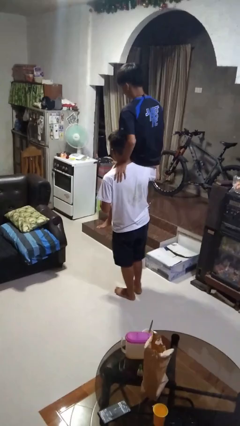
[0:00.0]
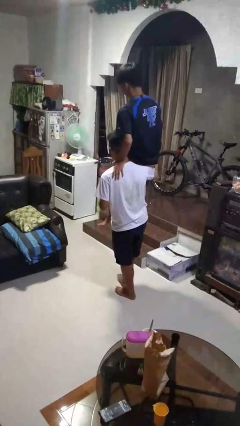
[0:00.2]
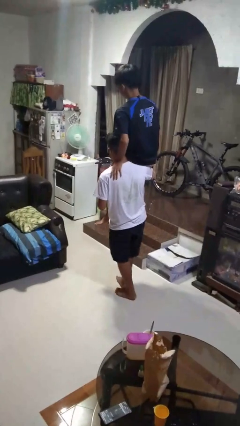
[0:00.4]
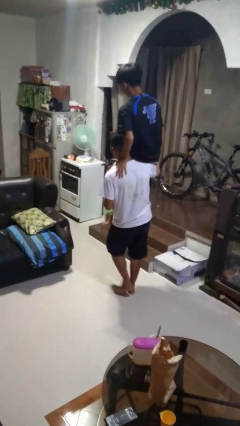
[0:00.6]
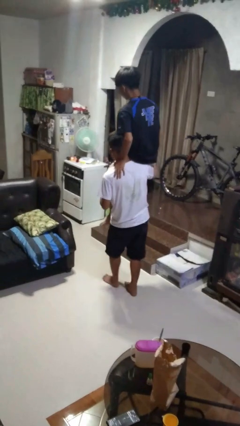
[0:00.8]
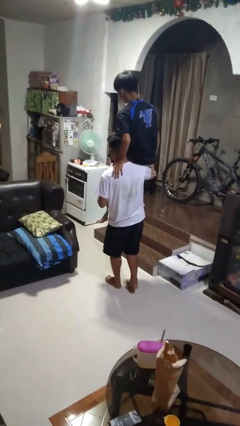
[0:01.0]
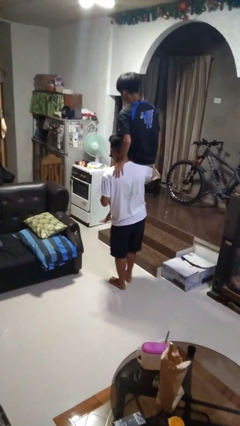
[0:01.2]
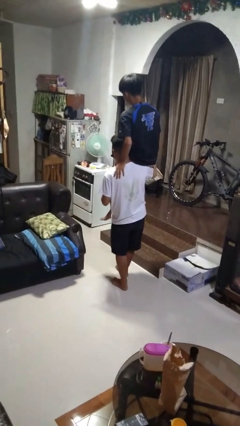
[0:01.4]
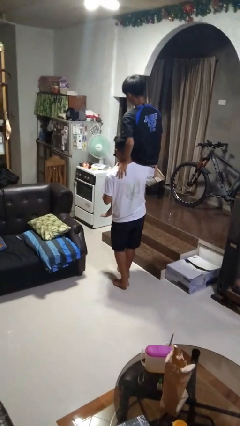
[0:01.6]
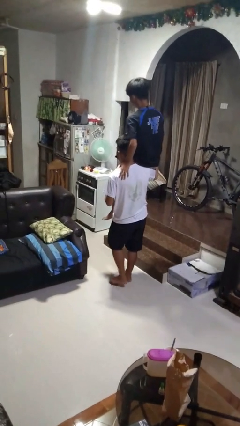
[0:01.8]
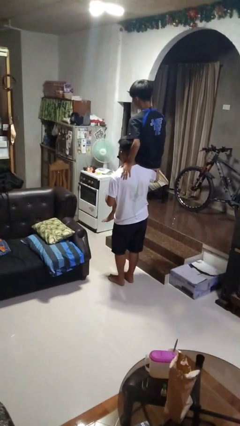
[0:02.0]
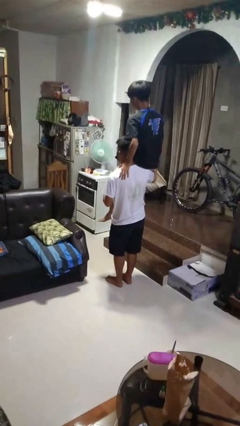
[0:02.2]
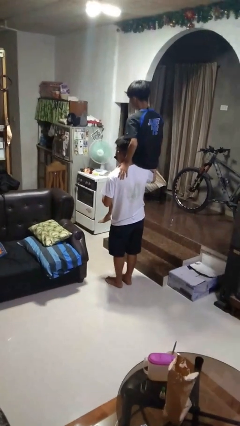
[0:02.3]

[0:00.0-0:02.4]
person carries person on back

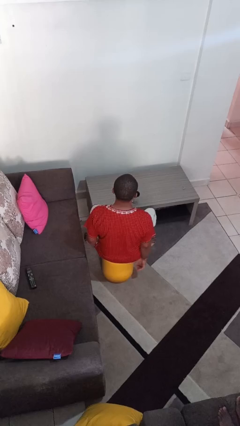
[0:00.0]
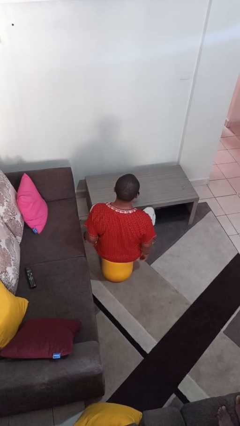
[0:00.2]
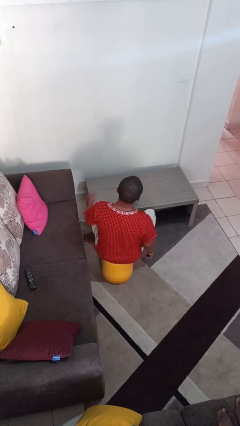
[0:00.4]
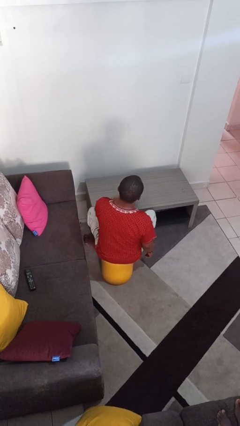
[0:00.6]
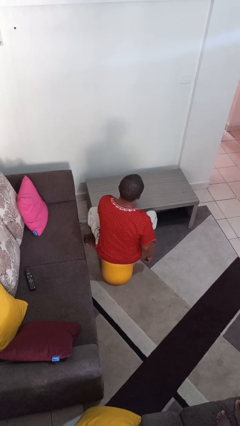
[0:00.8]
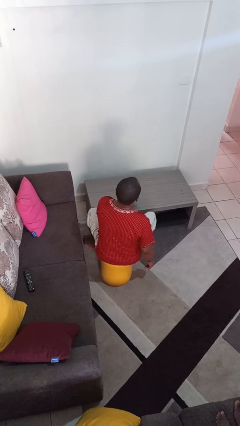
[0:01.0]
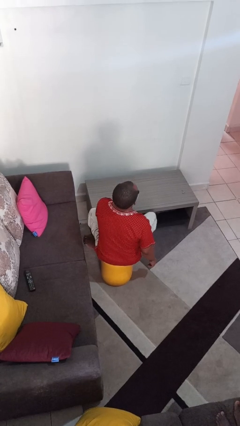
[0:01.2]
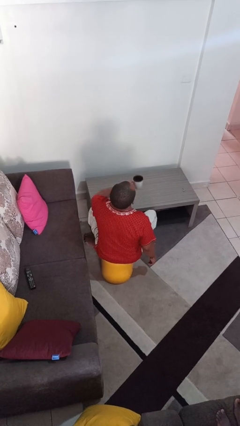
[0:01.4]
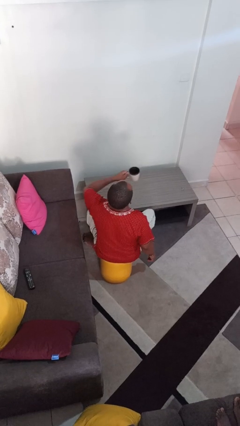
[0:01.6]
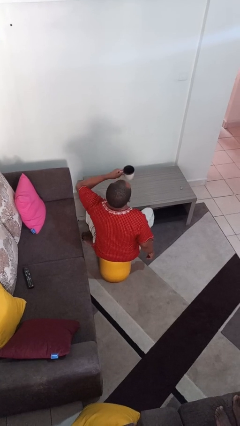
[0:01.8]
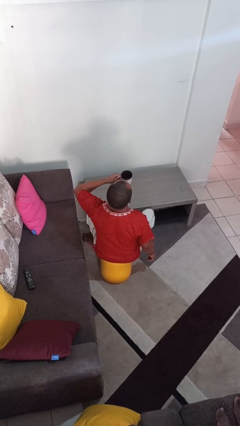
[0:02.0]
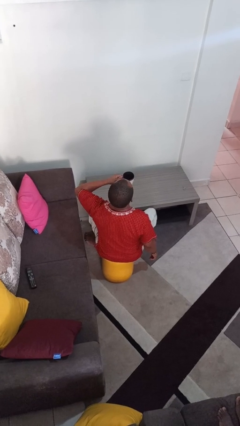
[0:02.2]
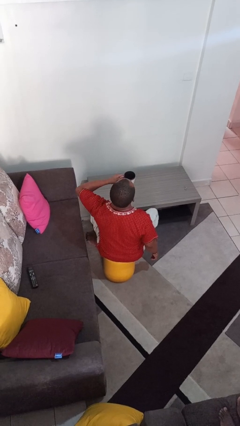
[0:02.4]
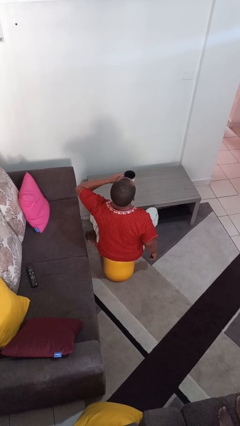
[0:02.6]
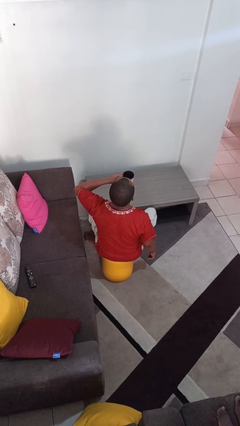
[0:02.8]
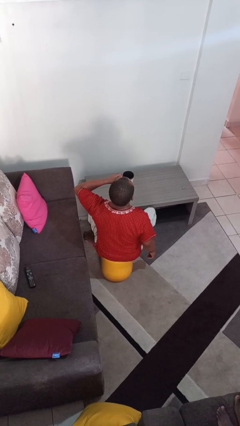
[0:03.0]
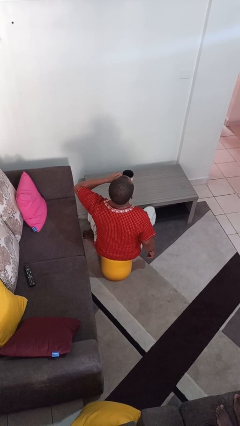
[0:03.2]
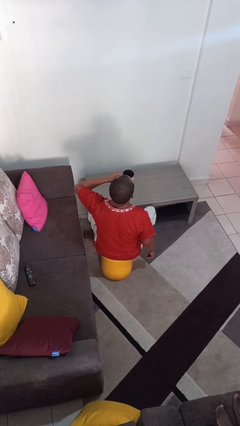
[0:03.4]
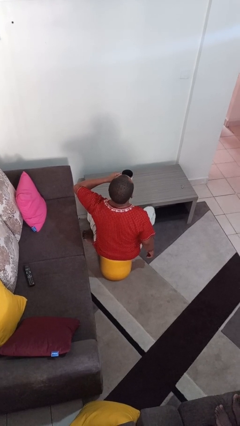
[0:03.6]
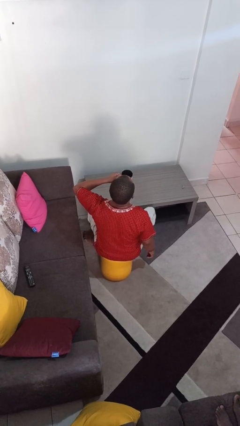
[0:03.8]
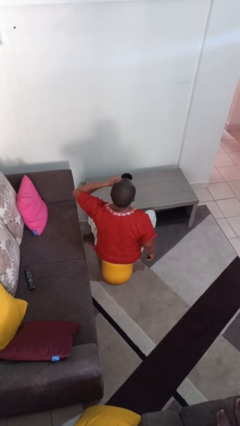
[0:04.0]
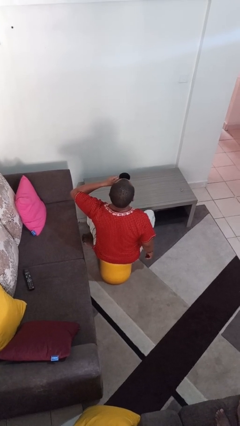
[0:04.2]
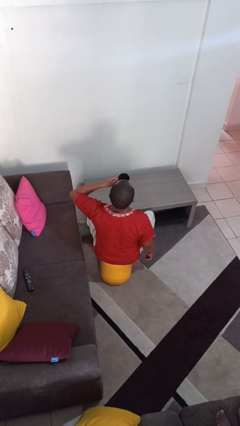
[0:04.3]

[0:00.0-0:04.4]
person picks up object from table

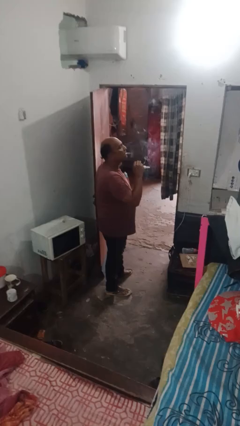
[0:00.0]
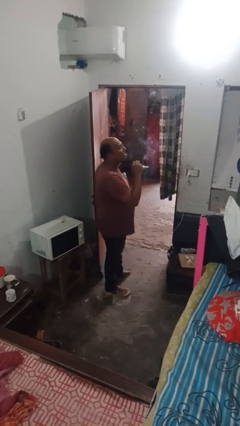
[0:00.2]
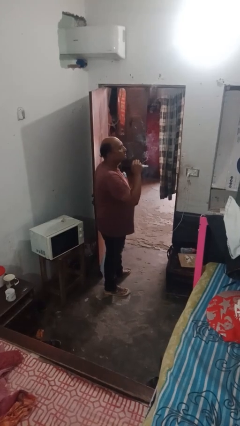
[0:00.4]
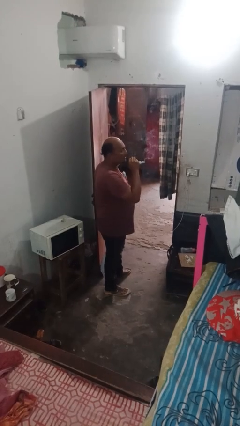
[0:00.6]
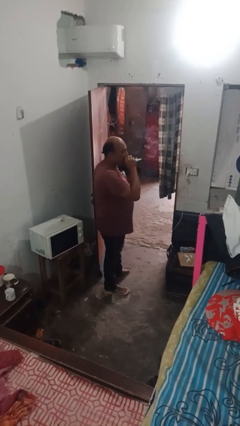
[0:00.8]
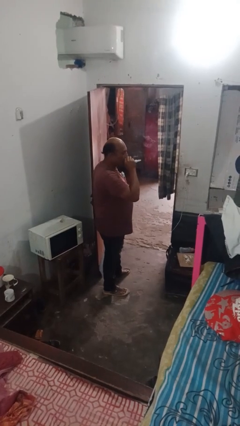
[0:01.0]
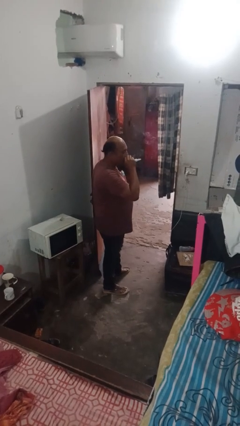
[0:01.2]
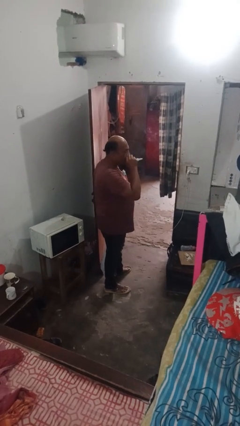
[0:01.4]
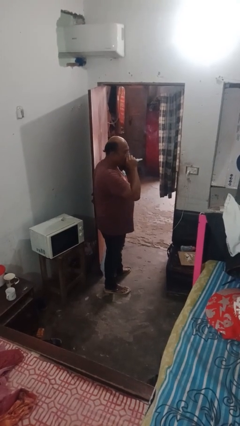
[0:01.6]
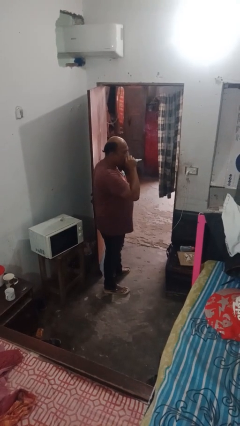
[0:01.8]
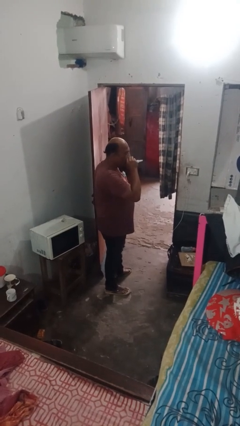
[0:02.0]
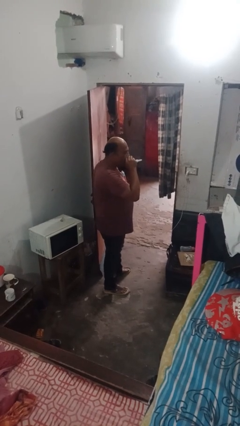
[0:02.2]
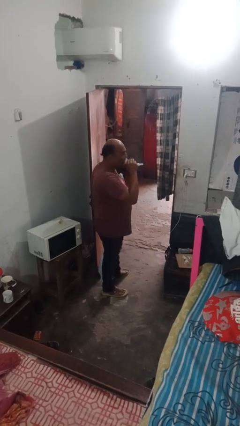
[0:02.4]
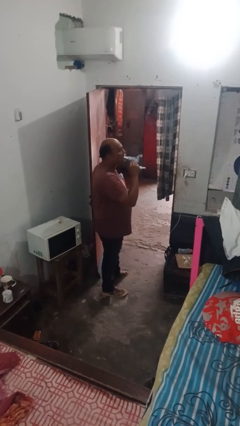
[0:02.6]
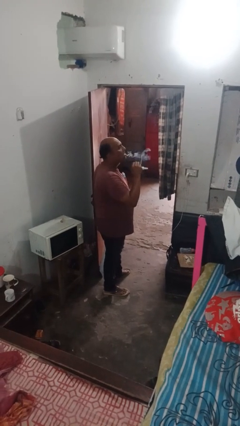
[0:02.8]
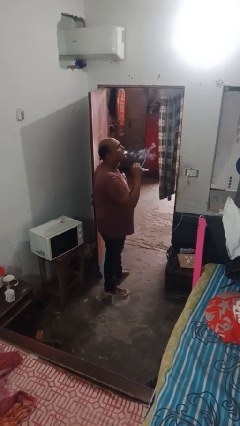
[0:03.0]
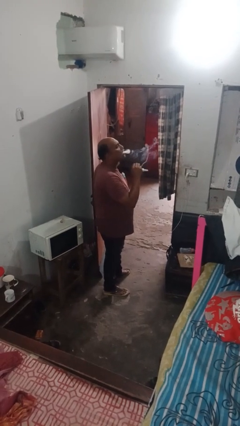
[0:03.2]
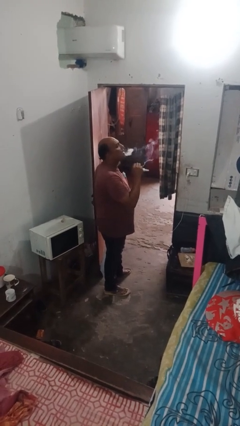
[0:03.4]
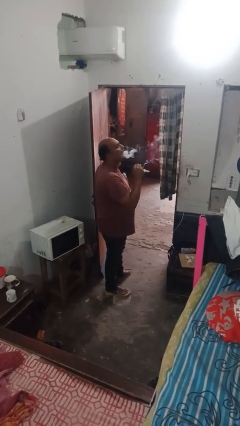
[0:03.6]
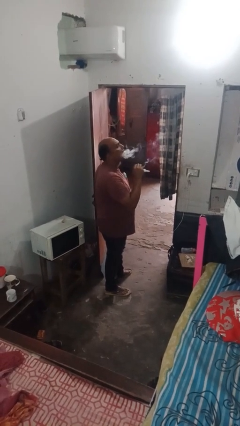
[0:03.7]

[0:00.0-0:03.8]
person vapes

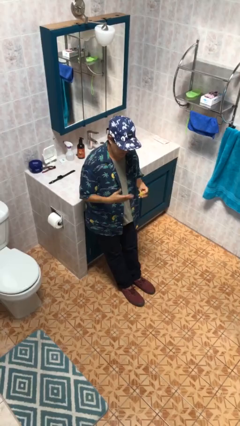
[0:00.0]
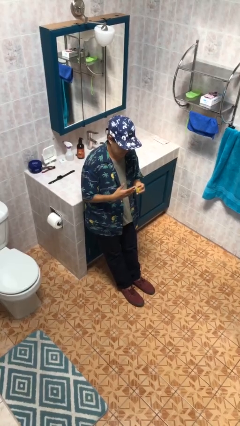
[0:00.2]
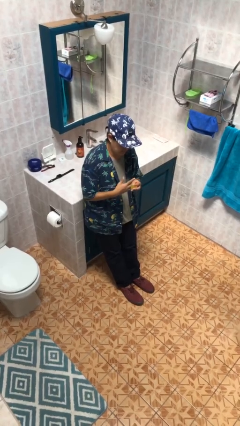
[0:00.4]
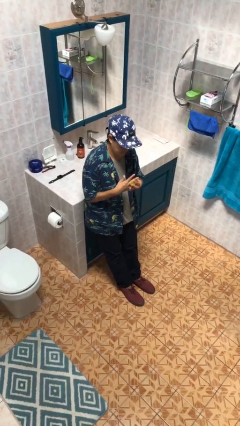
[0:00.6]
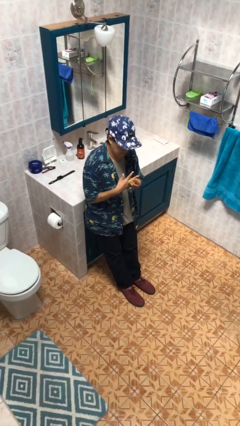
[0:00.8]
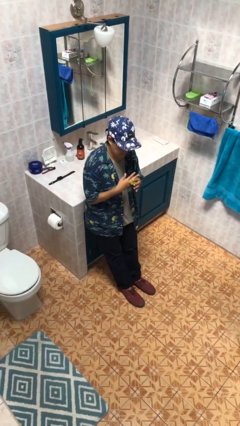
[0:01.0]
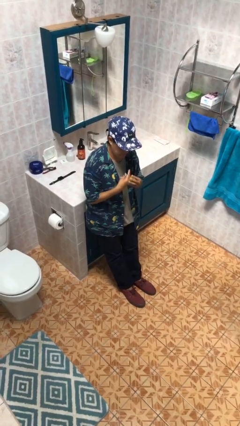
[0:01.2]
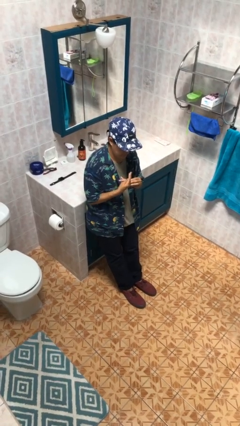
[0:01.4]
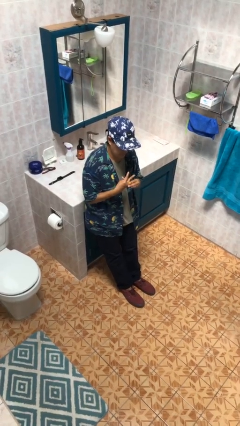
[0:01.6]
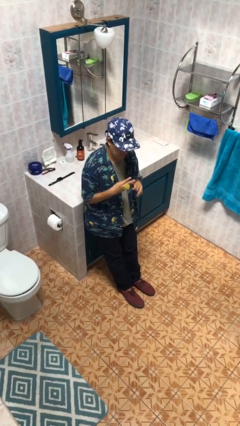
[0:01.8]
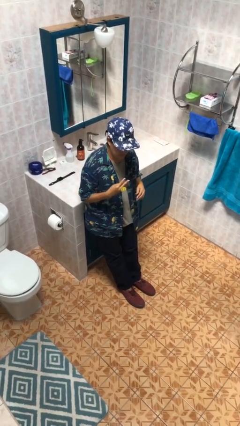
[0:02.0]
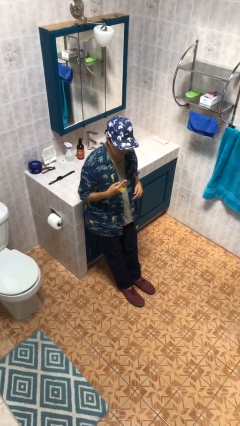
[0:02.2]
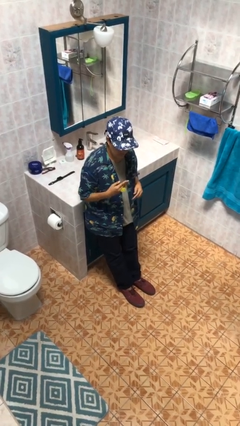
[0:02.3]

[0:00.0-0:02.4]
person puts on ring

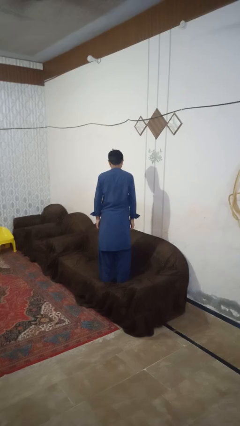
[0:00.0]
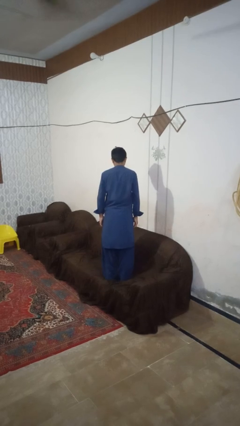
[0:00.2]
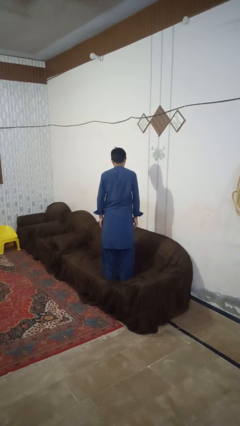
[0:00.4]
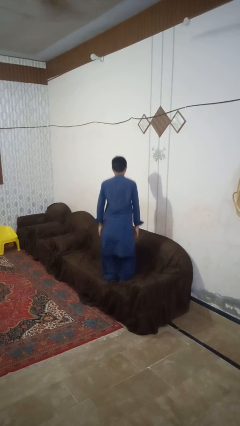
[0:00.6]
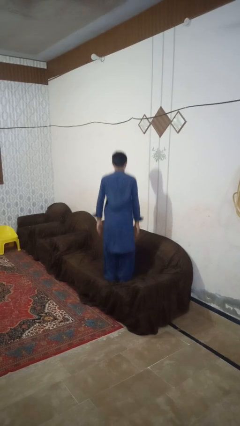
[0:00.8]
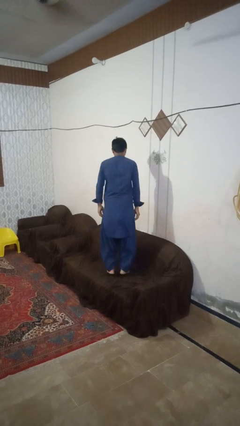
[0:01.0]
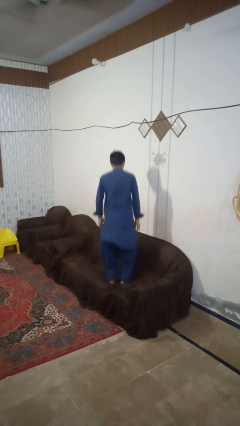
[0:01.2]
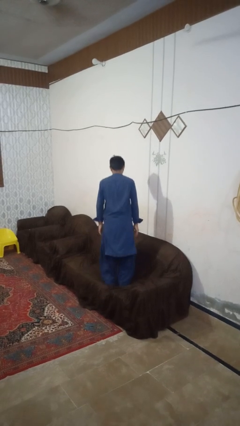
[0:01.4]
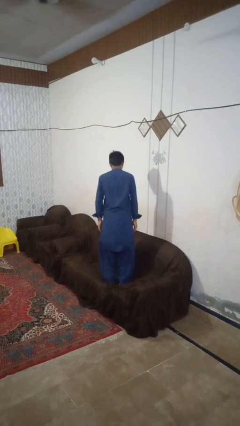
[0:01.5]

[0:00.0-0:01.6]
person jumps on couch

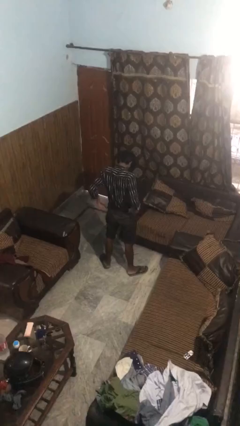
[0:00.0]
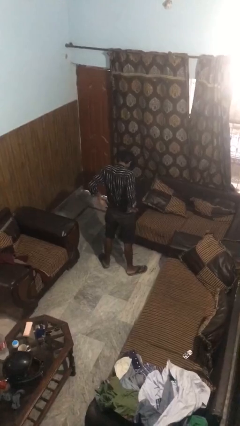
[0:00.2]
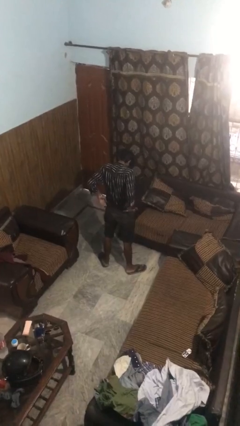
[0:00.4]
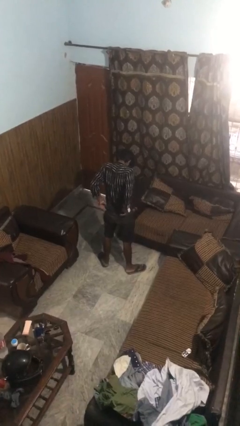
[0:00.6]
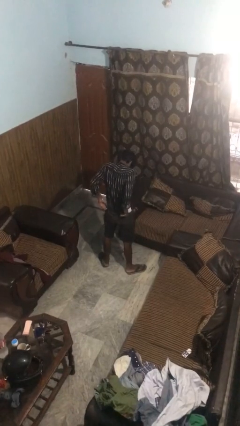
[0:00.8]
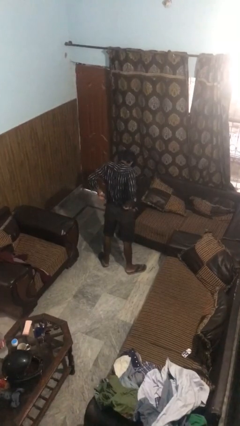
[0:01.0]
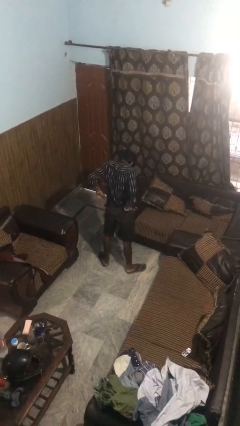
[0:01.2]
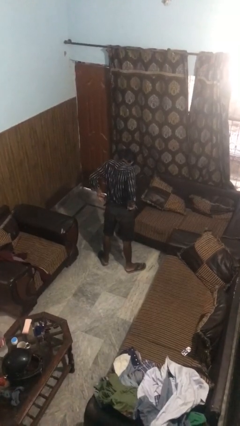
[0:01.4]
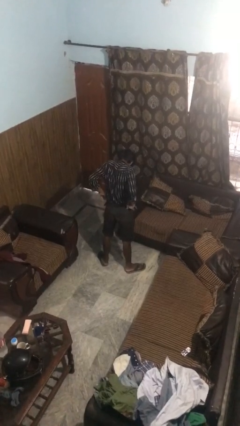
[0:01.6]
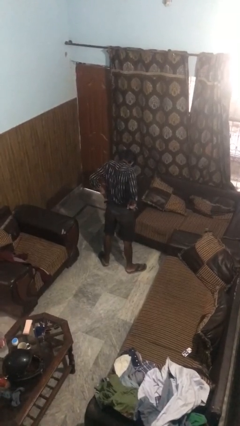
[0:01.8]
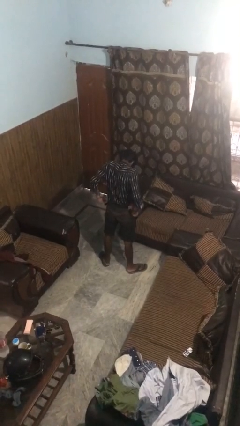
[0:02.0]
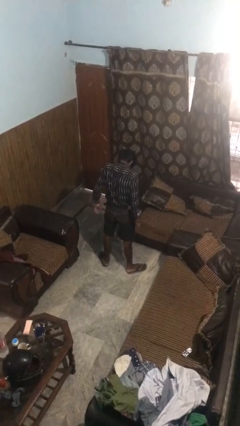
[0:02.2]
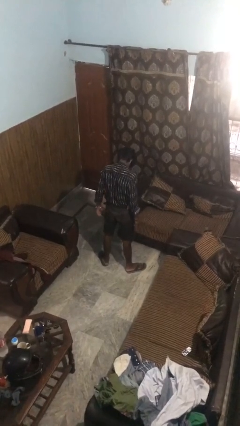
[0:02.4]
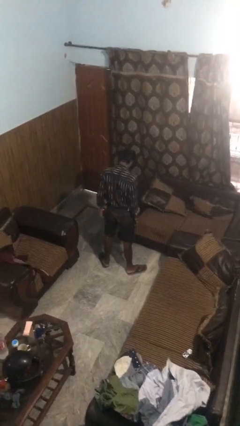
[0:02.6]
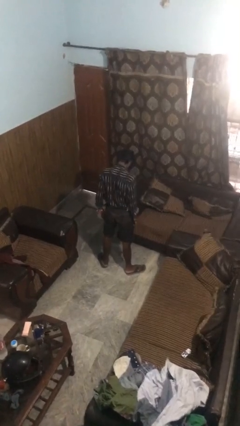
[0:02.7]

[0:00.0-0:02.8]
person hikes up pants

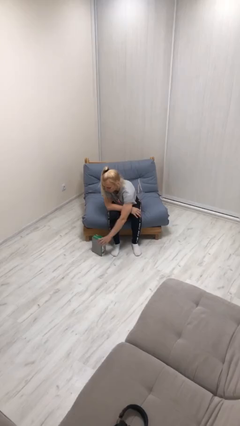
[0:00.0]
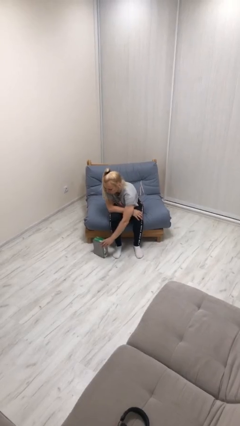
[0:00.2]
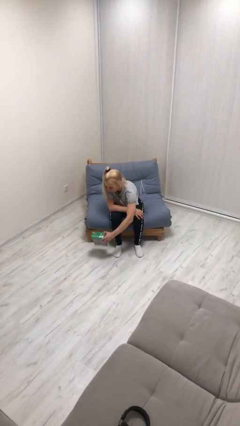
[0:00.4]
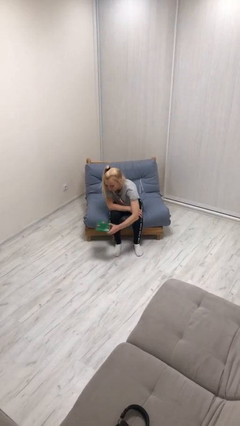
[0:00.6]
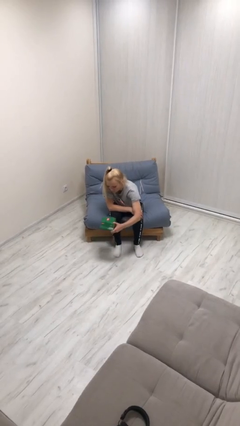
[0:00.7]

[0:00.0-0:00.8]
person picks up object from floor
